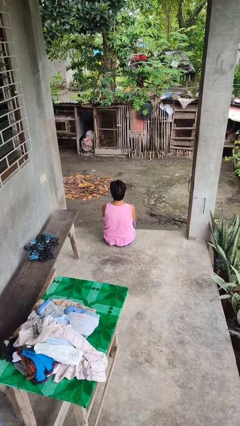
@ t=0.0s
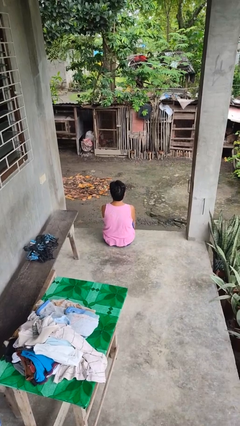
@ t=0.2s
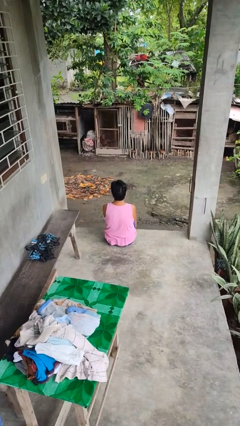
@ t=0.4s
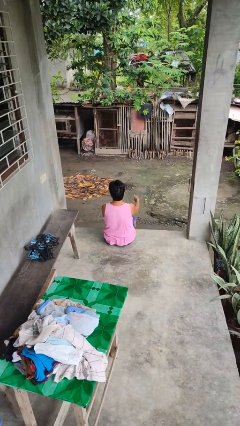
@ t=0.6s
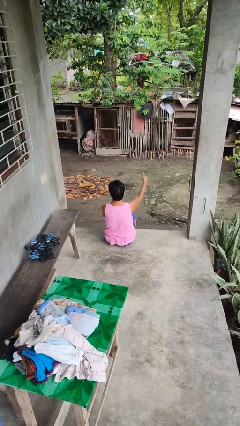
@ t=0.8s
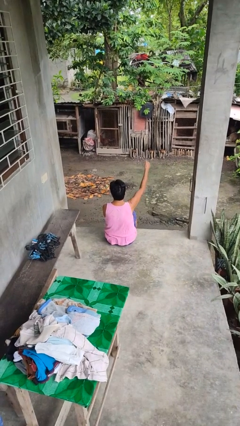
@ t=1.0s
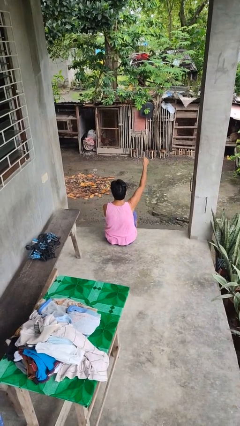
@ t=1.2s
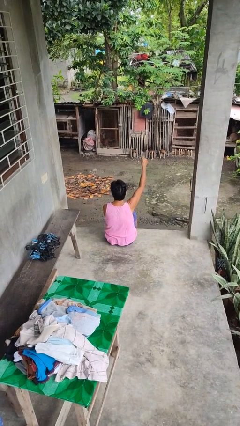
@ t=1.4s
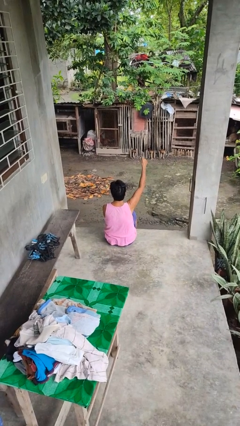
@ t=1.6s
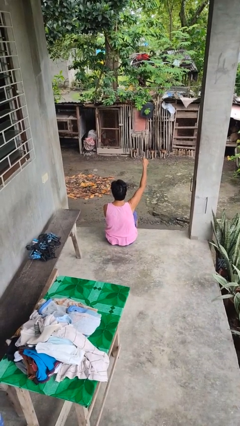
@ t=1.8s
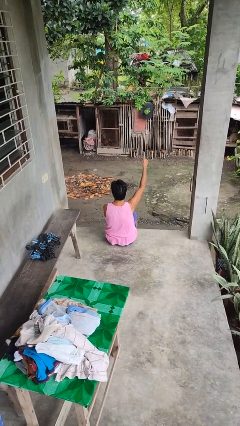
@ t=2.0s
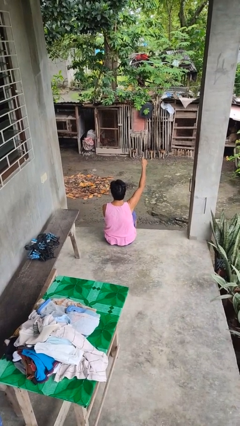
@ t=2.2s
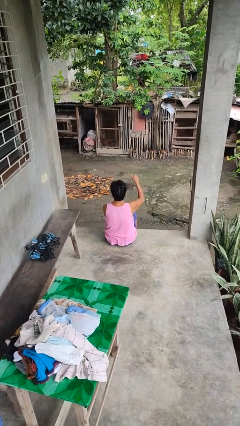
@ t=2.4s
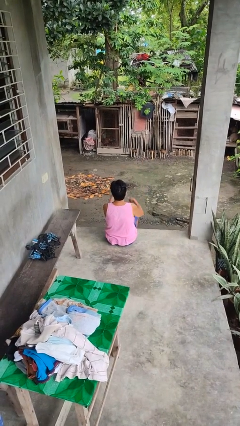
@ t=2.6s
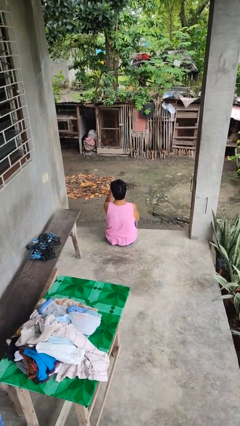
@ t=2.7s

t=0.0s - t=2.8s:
person gestures thumbs up

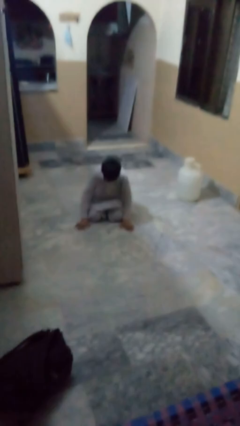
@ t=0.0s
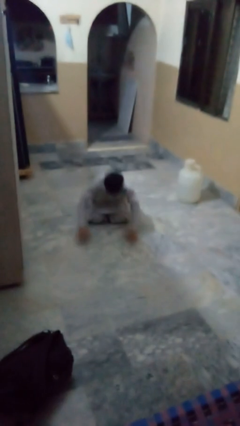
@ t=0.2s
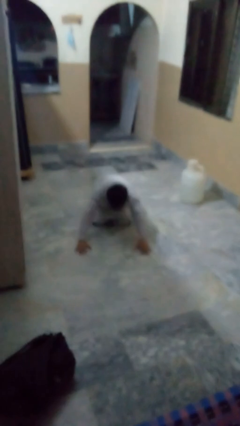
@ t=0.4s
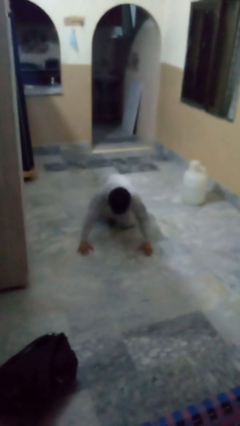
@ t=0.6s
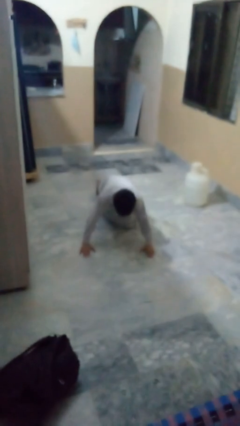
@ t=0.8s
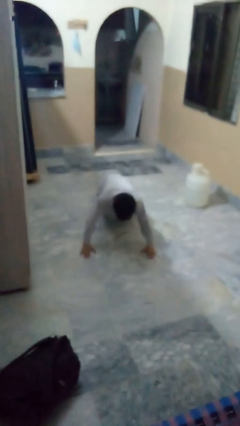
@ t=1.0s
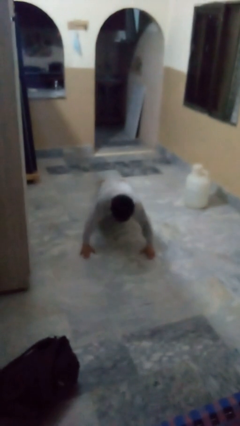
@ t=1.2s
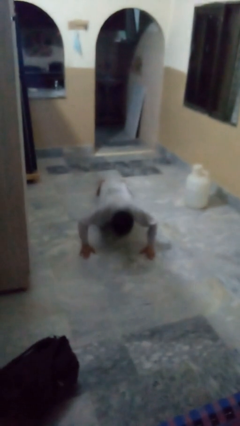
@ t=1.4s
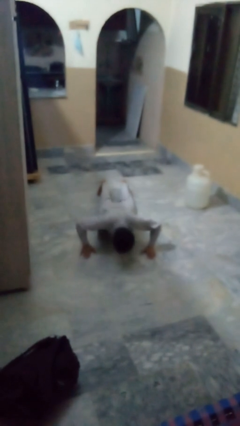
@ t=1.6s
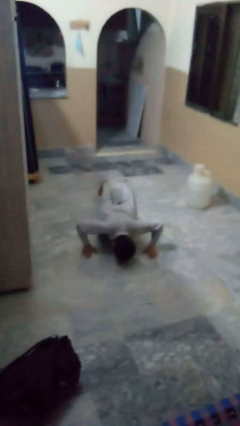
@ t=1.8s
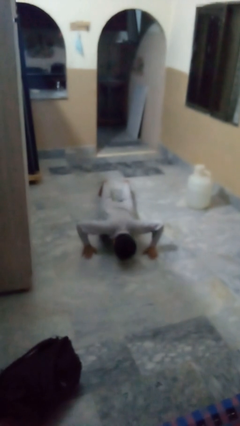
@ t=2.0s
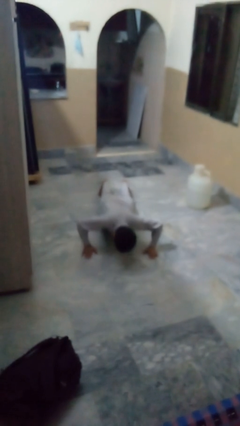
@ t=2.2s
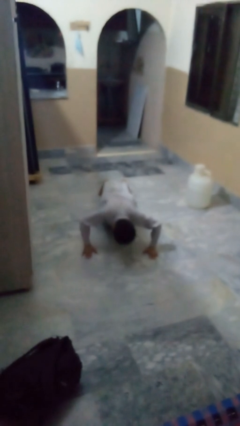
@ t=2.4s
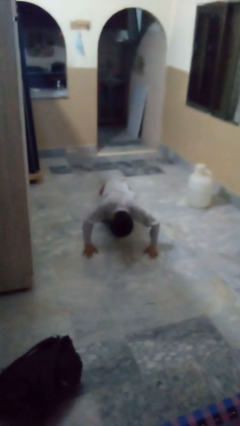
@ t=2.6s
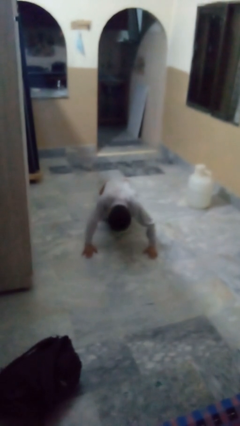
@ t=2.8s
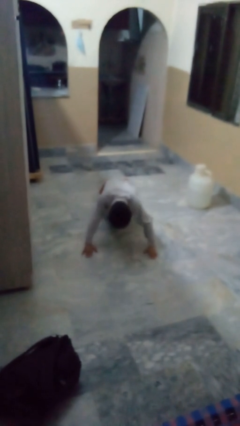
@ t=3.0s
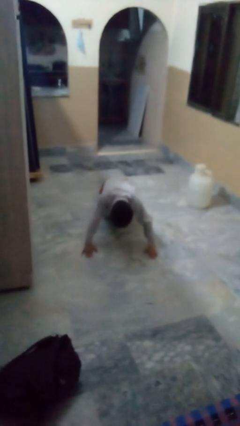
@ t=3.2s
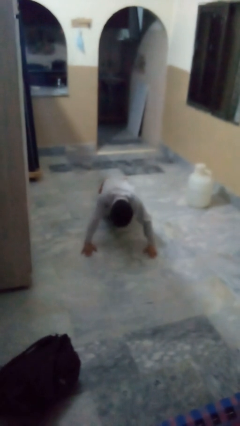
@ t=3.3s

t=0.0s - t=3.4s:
person exercises with pushup

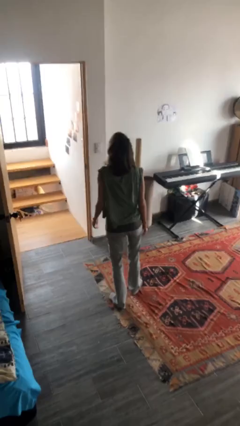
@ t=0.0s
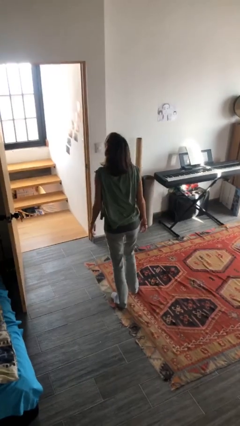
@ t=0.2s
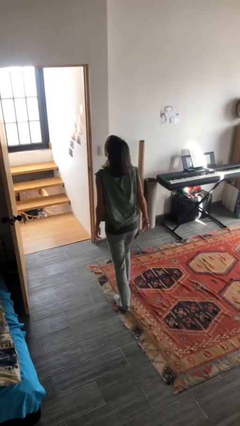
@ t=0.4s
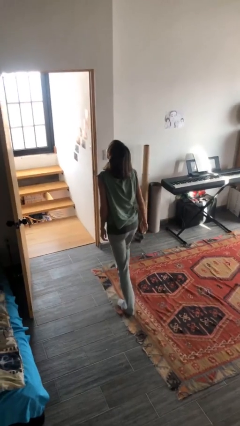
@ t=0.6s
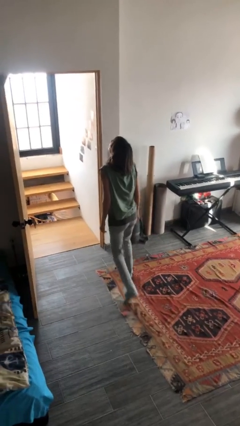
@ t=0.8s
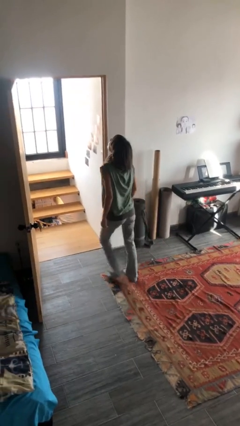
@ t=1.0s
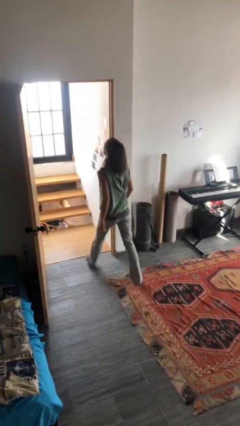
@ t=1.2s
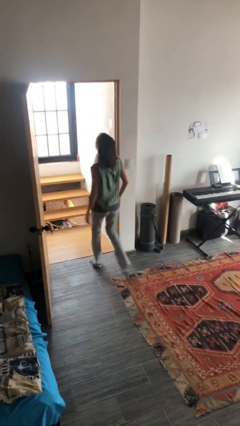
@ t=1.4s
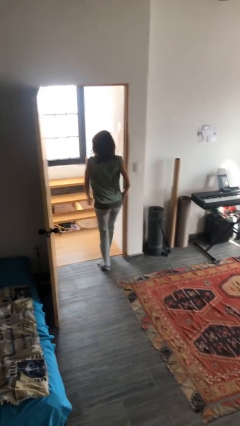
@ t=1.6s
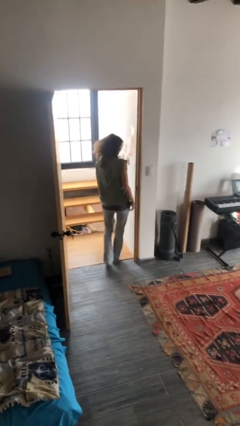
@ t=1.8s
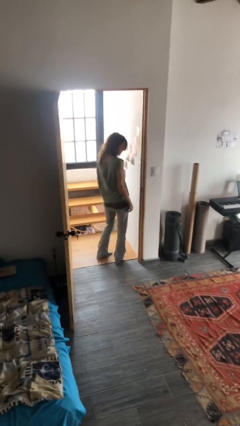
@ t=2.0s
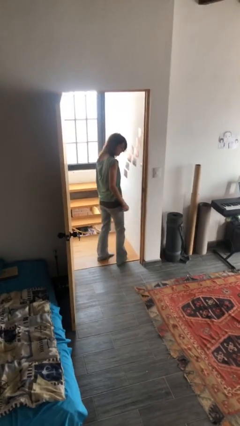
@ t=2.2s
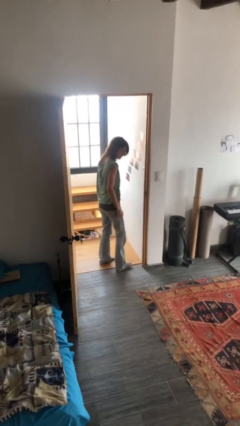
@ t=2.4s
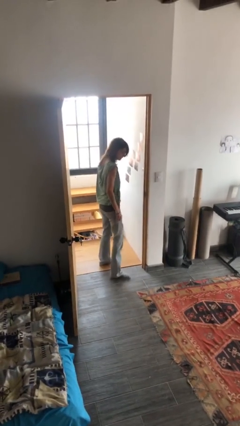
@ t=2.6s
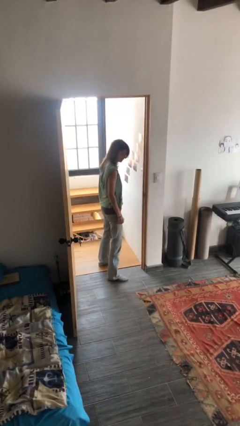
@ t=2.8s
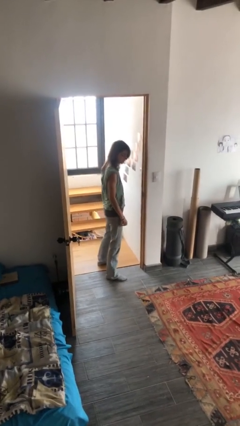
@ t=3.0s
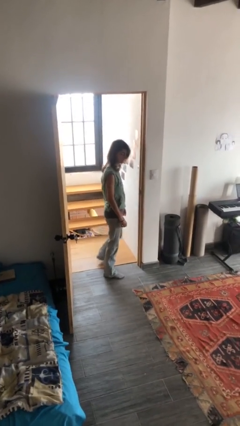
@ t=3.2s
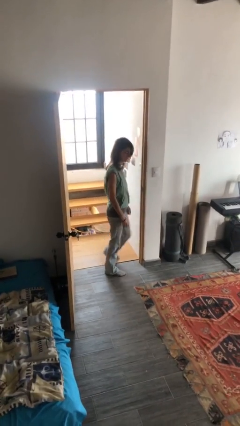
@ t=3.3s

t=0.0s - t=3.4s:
person bumps into wall

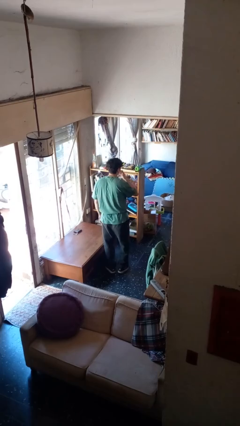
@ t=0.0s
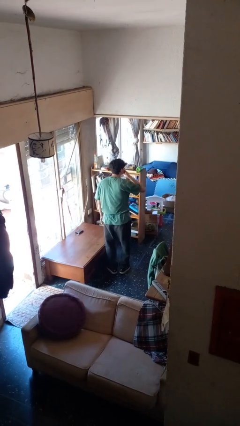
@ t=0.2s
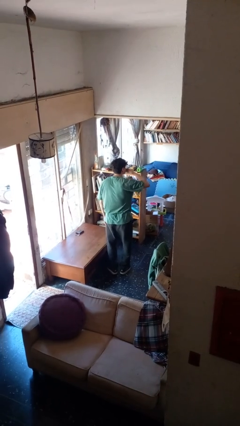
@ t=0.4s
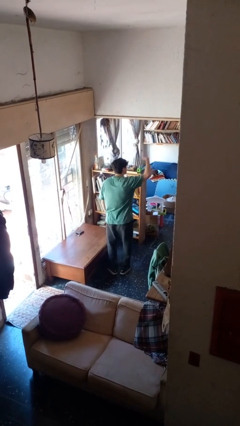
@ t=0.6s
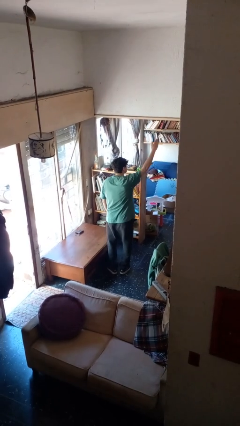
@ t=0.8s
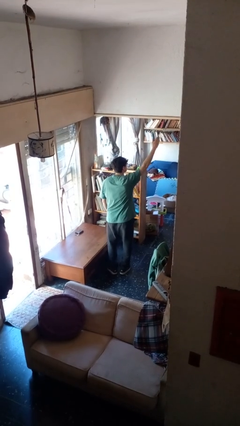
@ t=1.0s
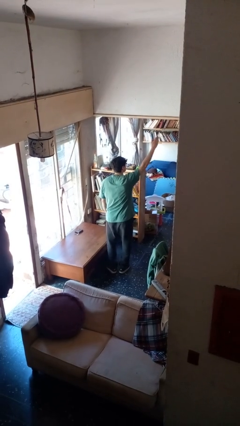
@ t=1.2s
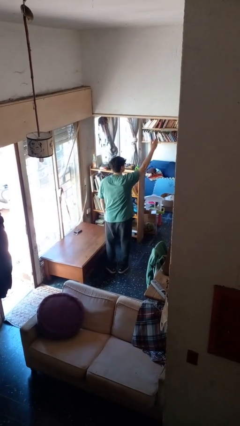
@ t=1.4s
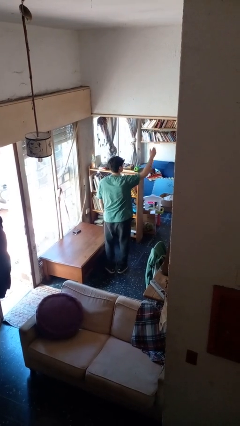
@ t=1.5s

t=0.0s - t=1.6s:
person gestures blow kiss

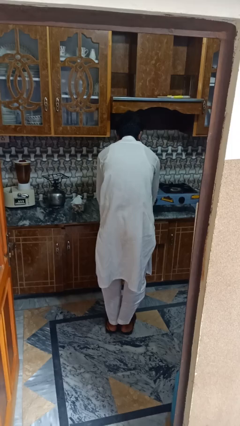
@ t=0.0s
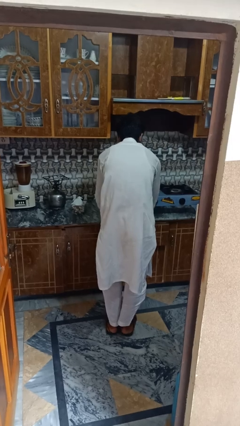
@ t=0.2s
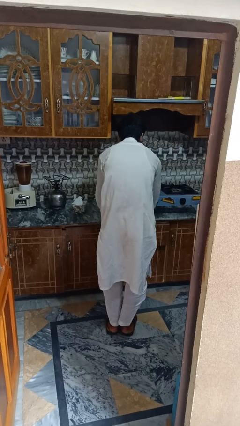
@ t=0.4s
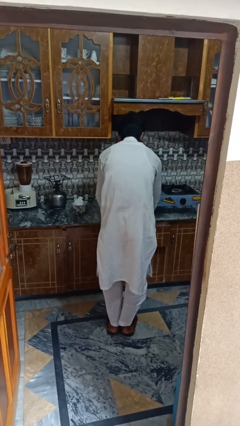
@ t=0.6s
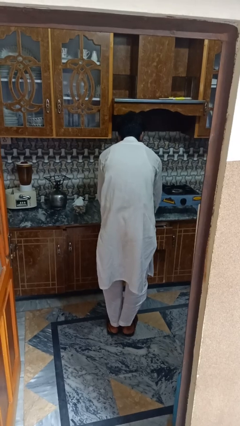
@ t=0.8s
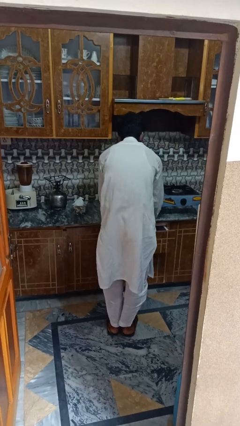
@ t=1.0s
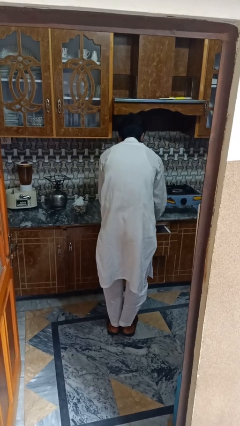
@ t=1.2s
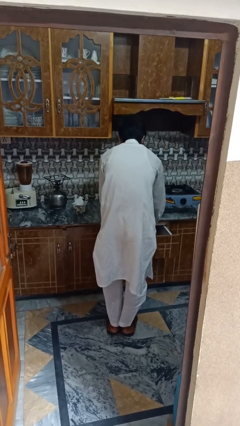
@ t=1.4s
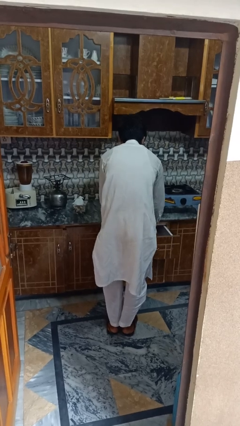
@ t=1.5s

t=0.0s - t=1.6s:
person searches in kitchen drawer

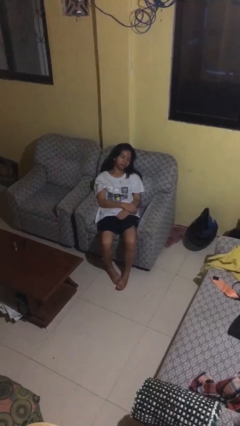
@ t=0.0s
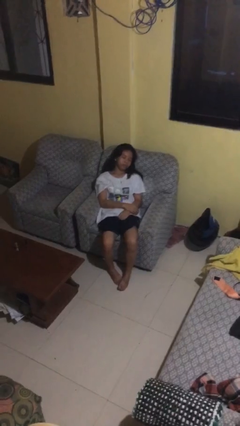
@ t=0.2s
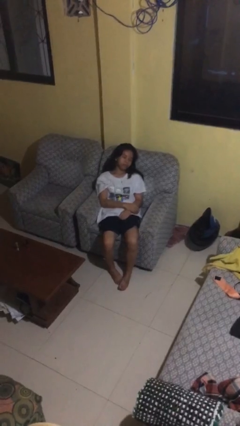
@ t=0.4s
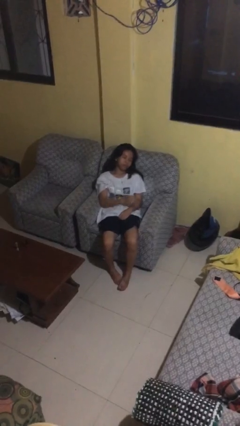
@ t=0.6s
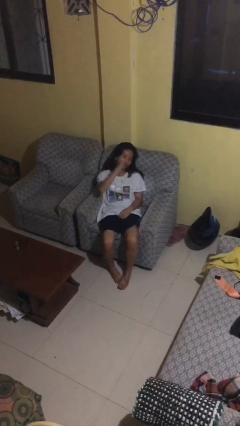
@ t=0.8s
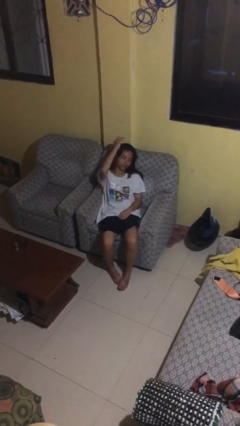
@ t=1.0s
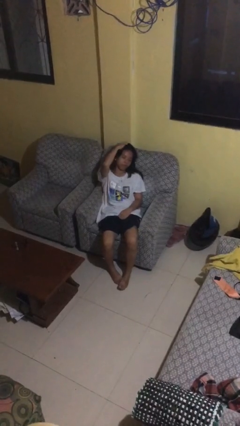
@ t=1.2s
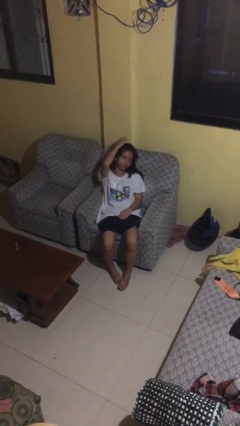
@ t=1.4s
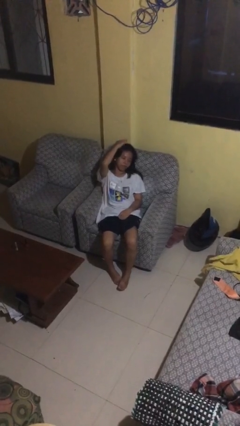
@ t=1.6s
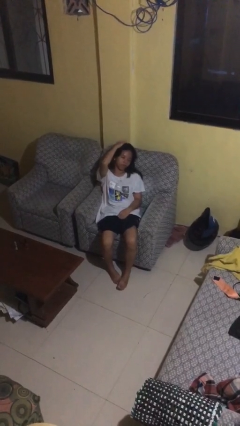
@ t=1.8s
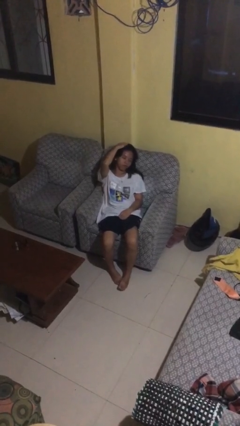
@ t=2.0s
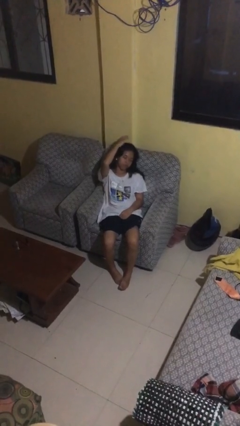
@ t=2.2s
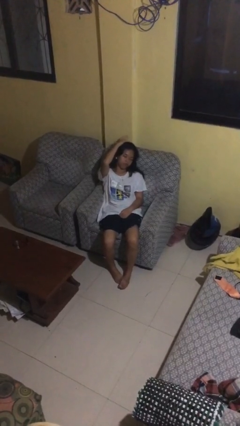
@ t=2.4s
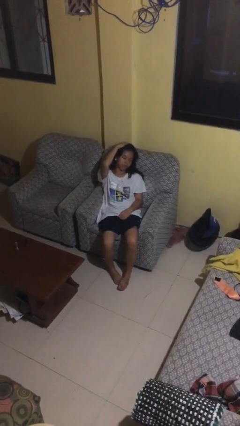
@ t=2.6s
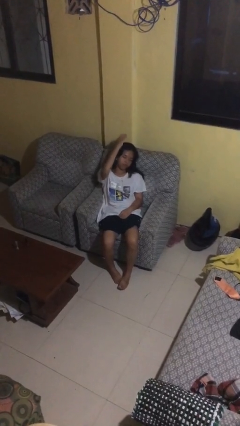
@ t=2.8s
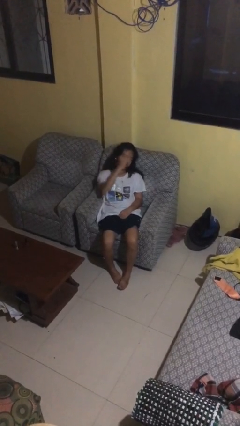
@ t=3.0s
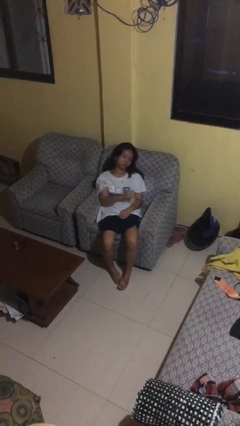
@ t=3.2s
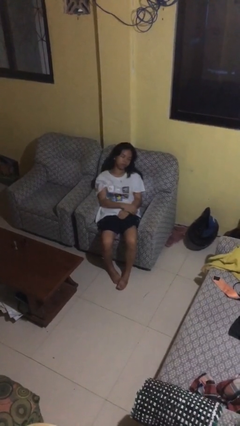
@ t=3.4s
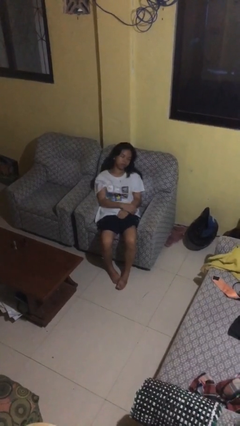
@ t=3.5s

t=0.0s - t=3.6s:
person pats head

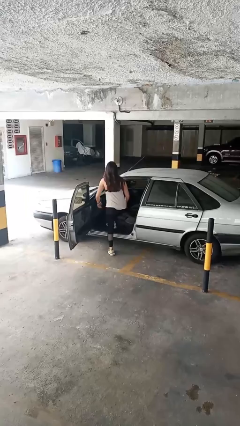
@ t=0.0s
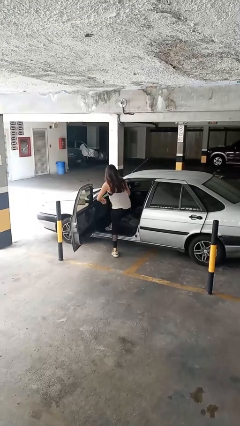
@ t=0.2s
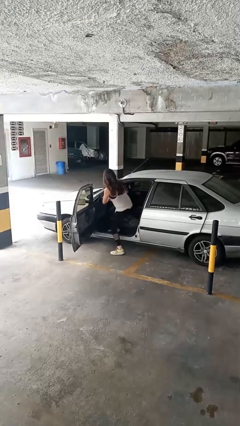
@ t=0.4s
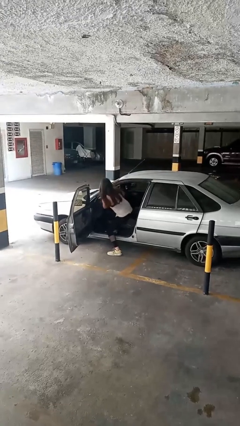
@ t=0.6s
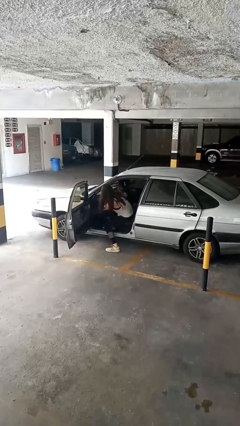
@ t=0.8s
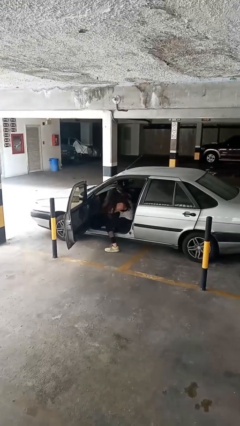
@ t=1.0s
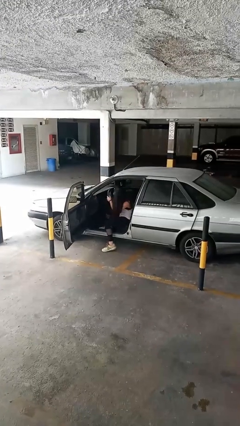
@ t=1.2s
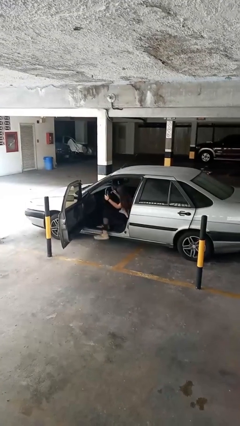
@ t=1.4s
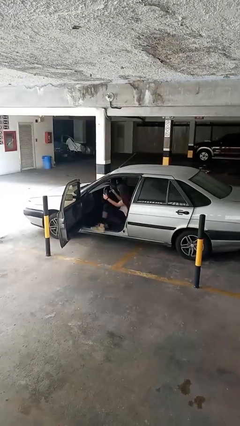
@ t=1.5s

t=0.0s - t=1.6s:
person enters car
